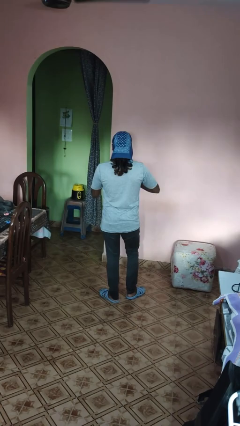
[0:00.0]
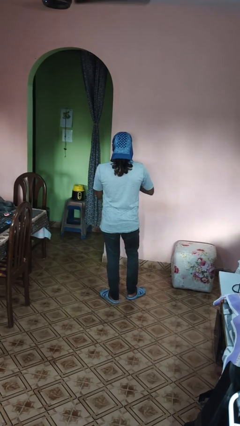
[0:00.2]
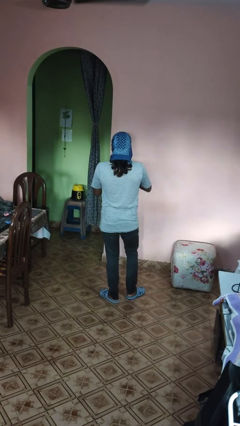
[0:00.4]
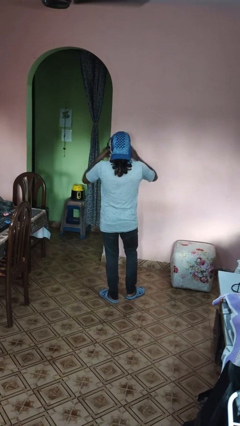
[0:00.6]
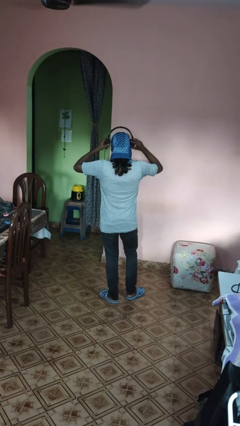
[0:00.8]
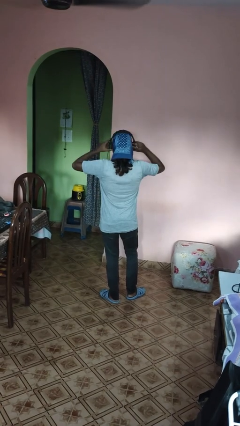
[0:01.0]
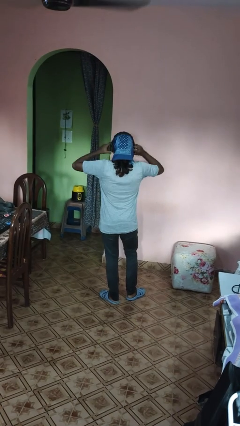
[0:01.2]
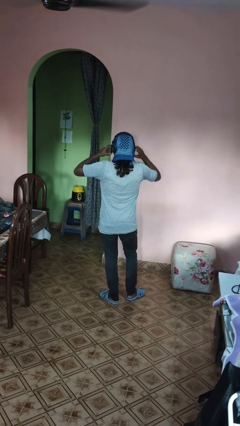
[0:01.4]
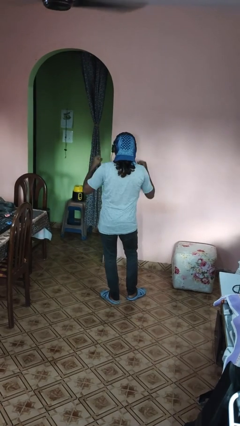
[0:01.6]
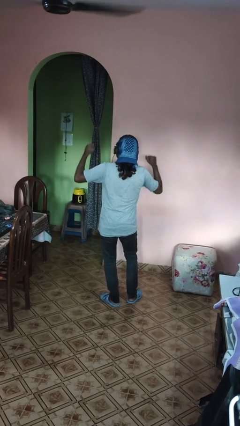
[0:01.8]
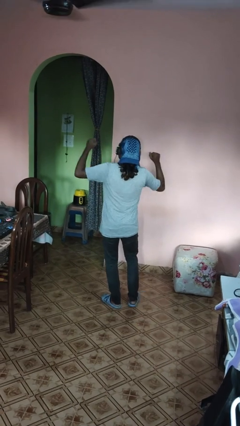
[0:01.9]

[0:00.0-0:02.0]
person puts on headphones

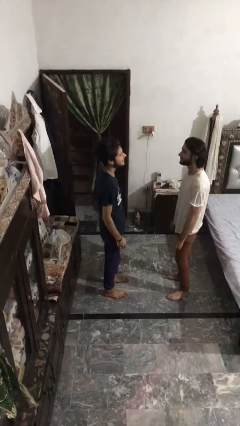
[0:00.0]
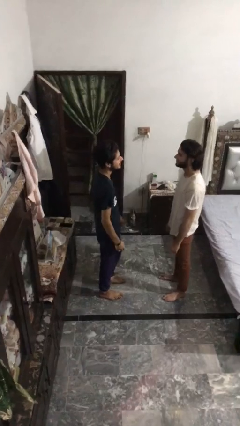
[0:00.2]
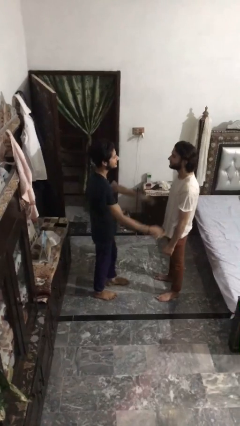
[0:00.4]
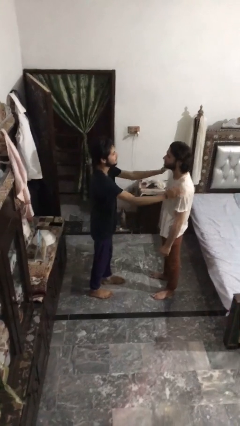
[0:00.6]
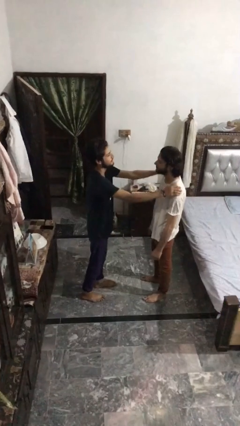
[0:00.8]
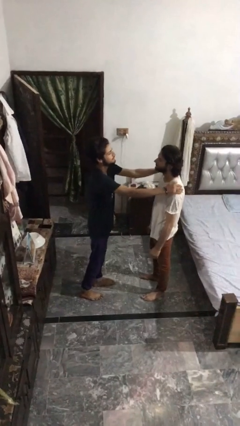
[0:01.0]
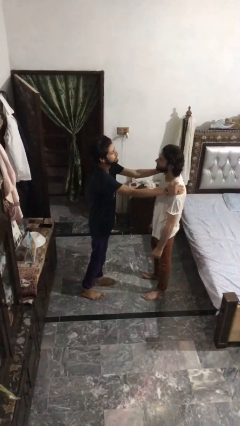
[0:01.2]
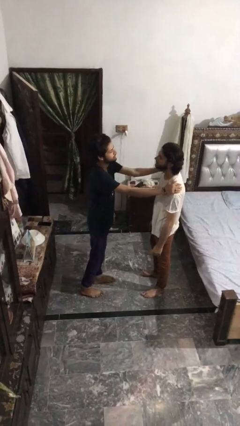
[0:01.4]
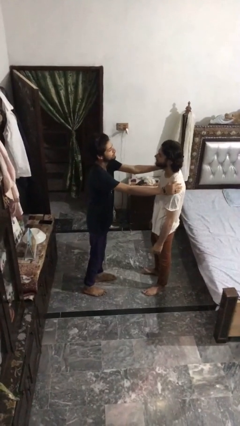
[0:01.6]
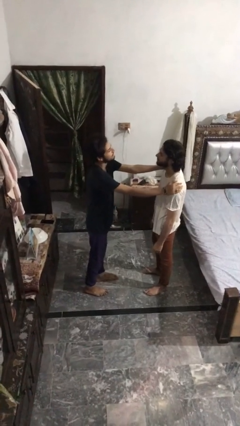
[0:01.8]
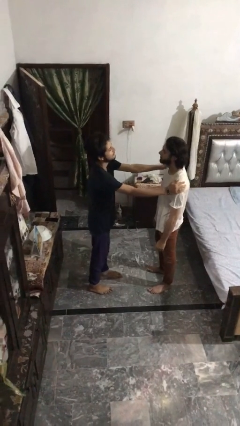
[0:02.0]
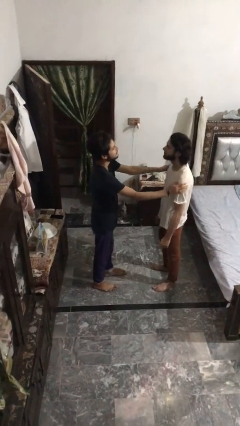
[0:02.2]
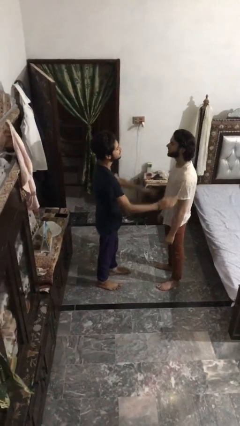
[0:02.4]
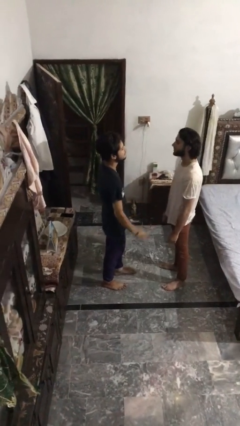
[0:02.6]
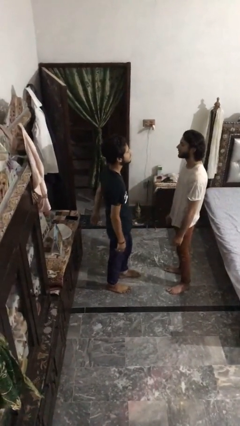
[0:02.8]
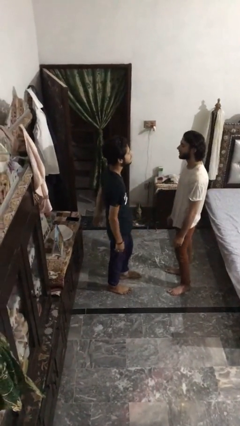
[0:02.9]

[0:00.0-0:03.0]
person pounds shoulders of person

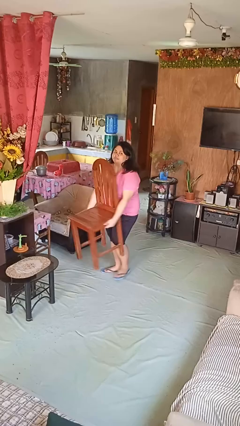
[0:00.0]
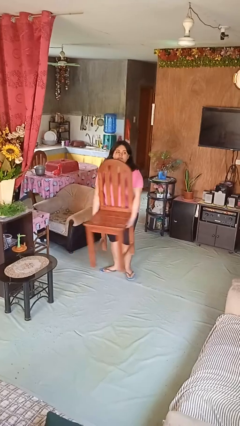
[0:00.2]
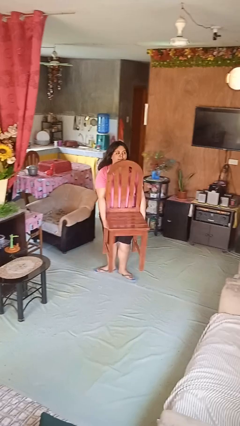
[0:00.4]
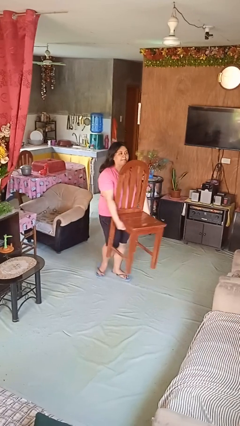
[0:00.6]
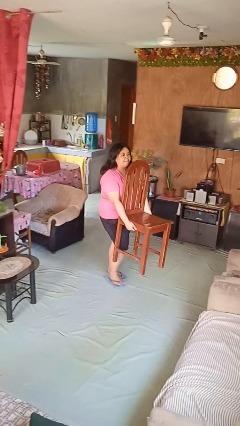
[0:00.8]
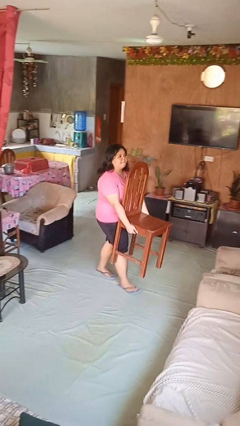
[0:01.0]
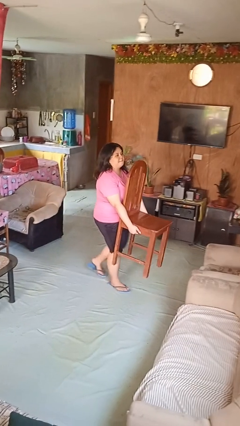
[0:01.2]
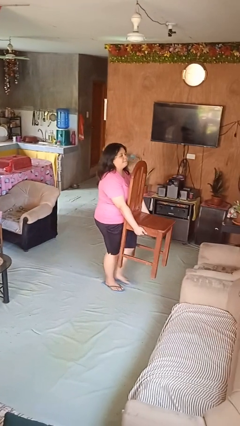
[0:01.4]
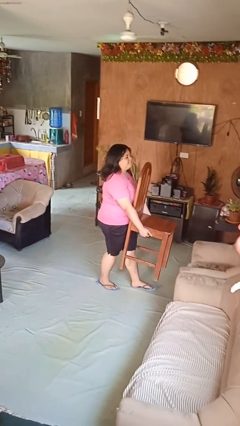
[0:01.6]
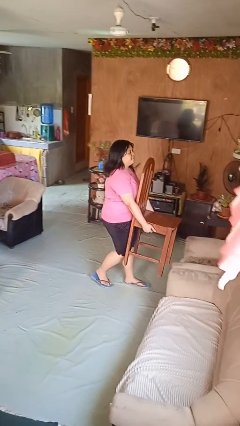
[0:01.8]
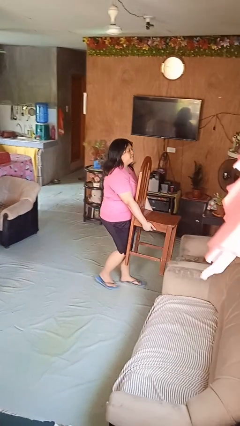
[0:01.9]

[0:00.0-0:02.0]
person carries furniture

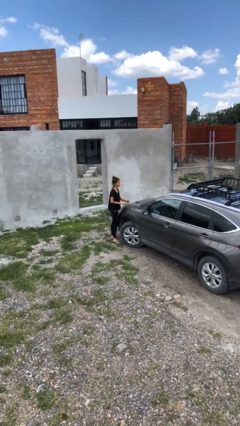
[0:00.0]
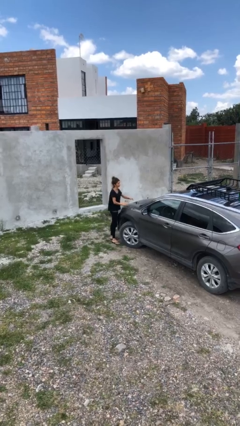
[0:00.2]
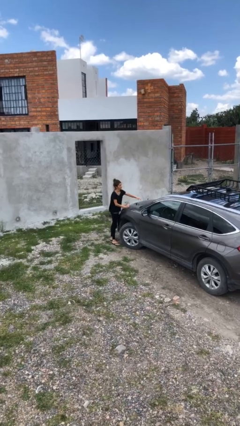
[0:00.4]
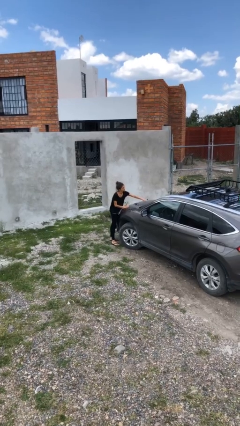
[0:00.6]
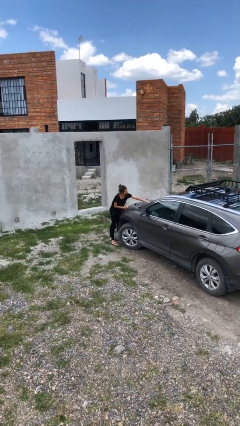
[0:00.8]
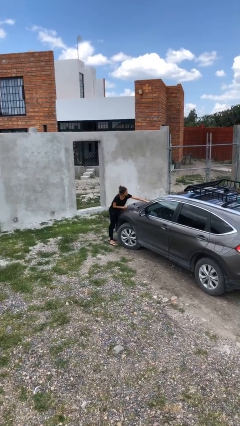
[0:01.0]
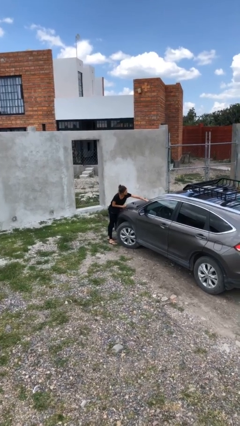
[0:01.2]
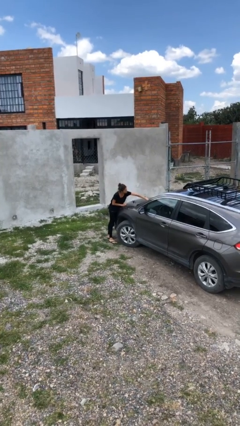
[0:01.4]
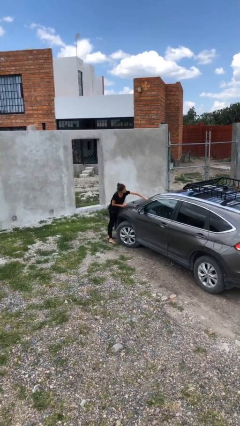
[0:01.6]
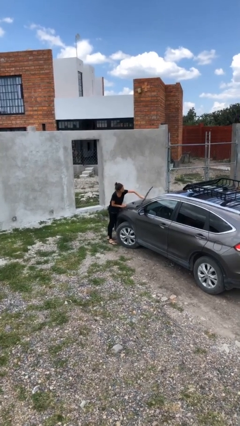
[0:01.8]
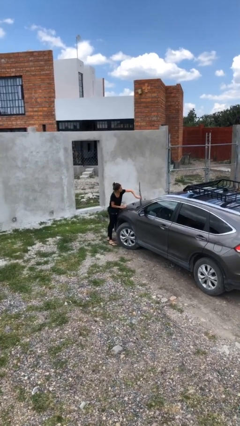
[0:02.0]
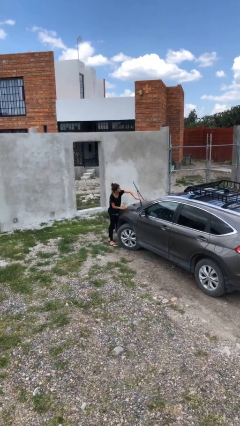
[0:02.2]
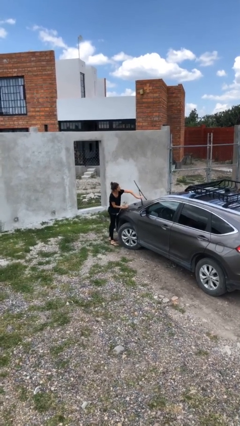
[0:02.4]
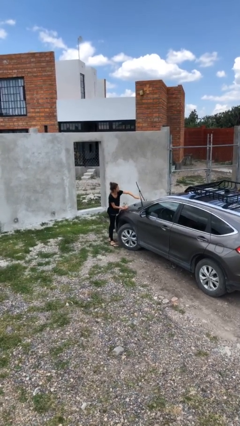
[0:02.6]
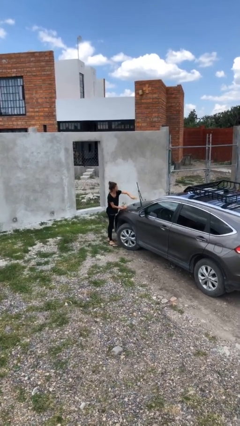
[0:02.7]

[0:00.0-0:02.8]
person flips up car wipers

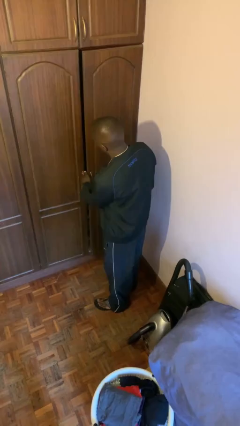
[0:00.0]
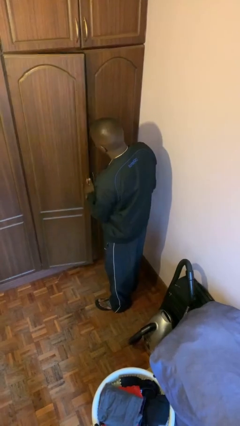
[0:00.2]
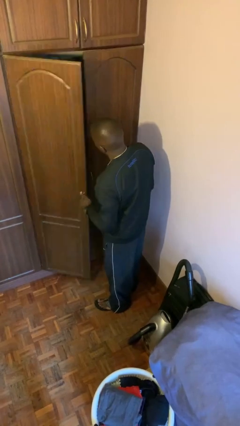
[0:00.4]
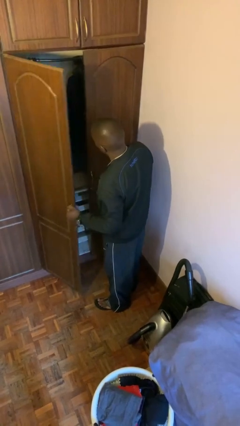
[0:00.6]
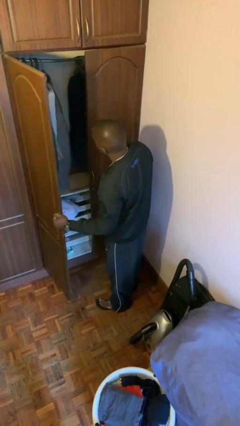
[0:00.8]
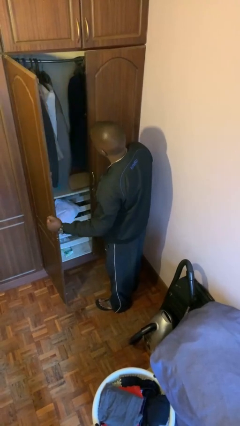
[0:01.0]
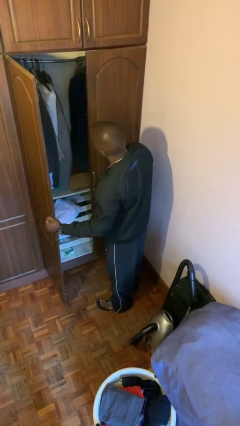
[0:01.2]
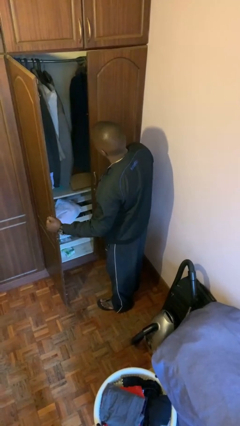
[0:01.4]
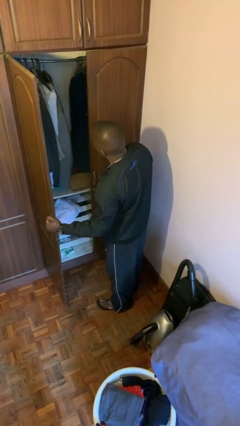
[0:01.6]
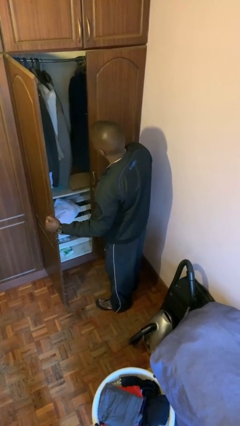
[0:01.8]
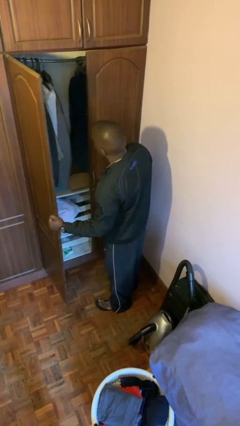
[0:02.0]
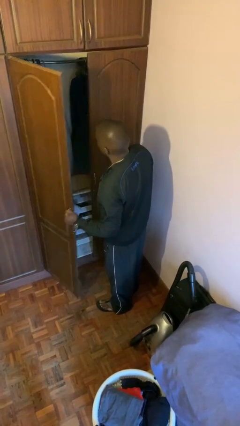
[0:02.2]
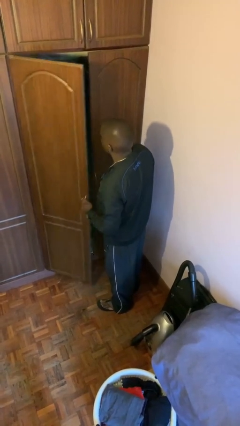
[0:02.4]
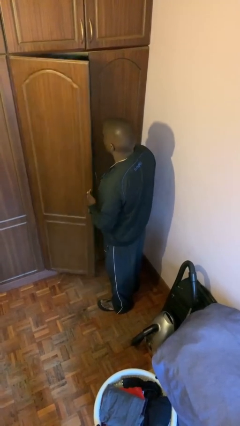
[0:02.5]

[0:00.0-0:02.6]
person opens closet door

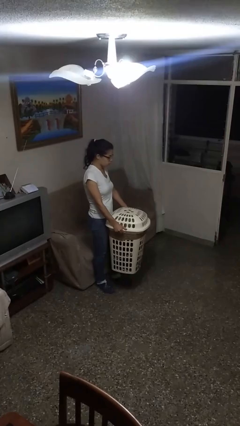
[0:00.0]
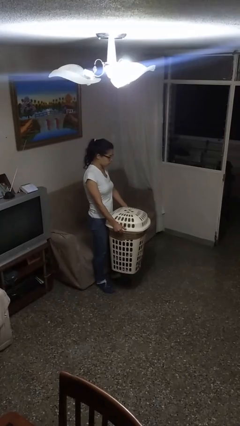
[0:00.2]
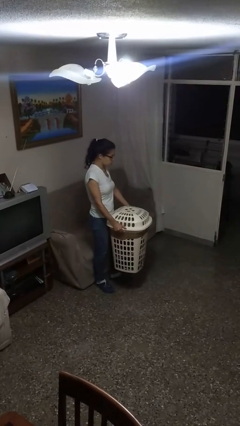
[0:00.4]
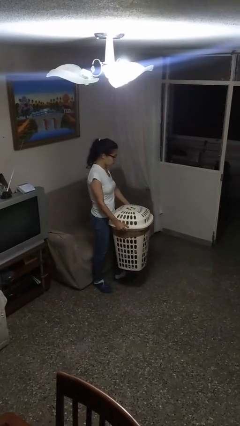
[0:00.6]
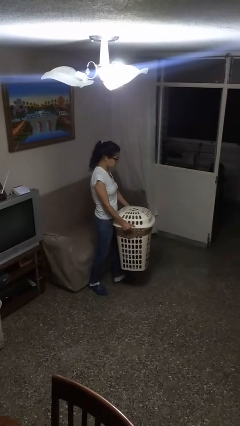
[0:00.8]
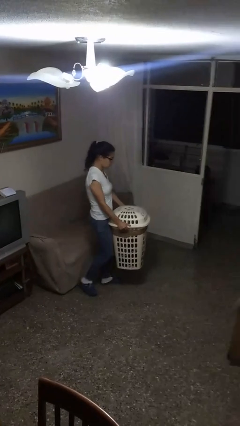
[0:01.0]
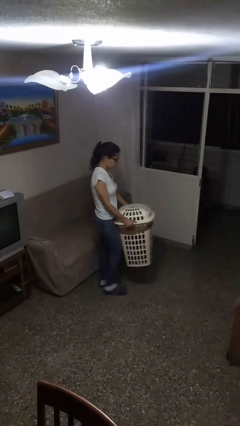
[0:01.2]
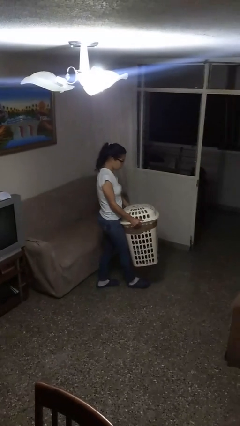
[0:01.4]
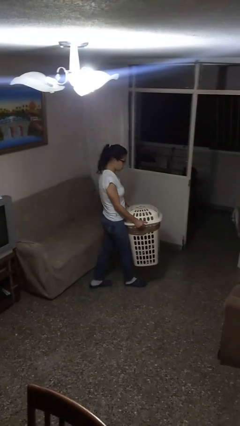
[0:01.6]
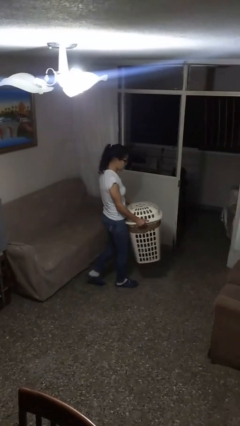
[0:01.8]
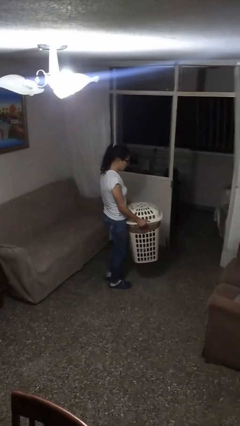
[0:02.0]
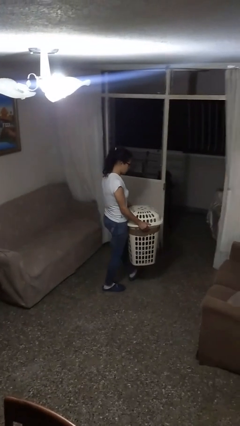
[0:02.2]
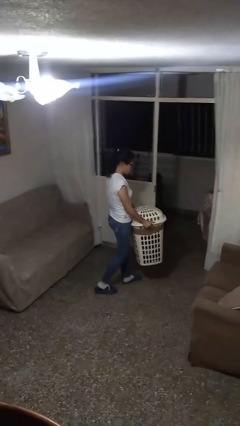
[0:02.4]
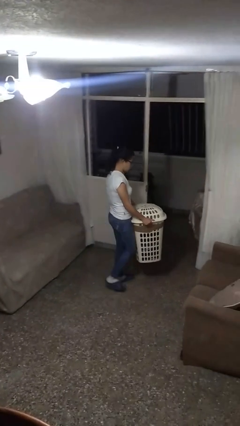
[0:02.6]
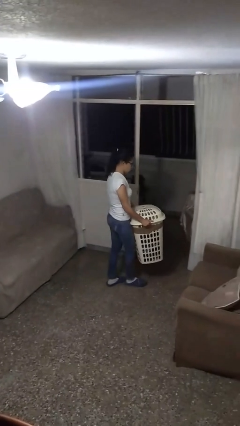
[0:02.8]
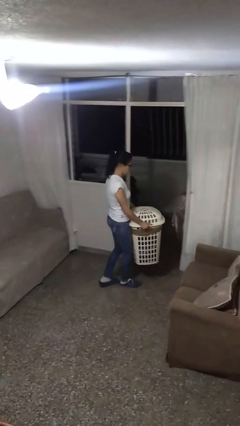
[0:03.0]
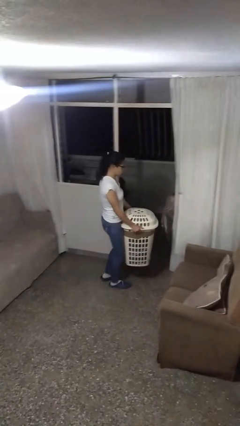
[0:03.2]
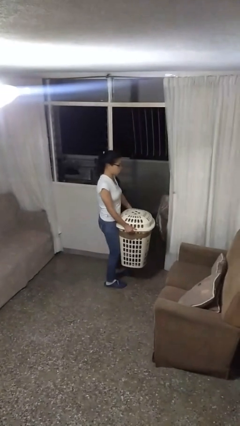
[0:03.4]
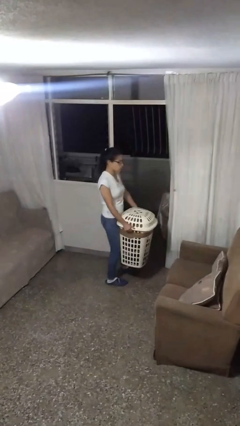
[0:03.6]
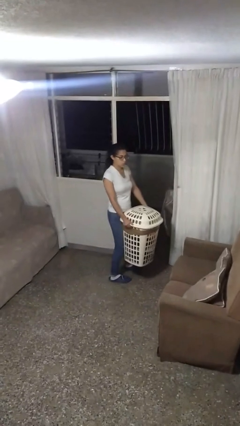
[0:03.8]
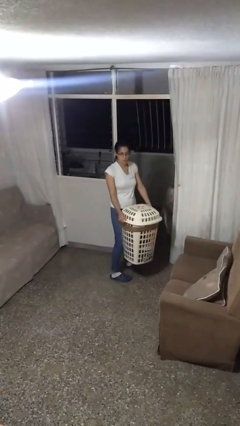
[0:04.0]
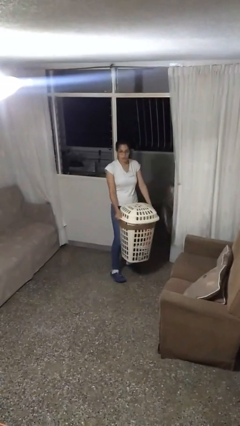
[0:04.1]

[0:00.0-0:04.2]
person carries laundry basket

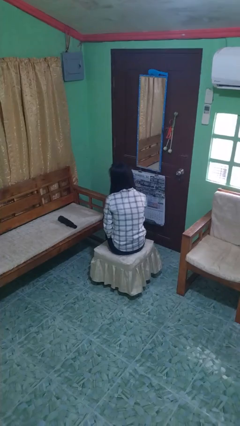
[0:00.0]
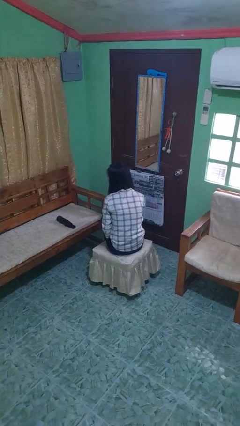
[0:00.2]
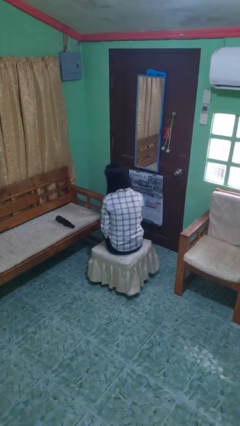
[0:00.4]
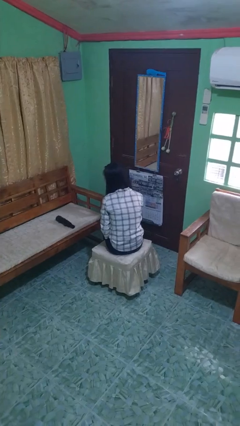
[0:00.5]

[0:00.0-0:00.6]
person picks up object from couch
